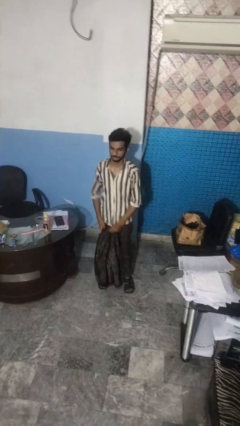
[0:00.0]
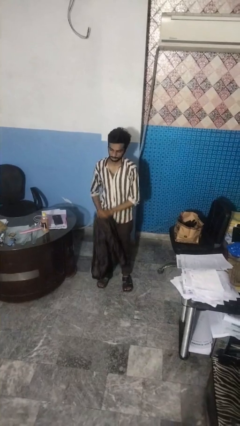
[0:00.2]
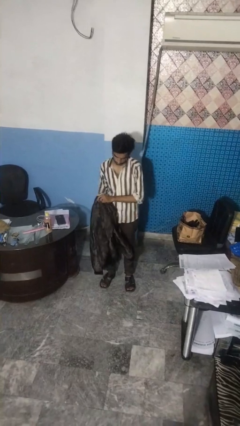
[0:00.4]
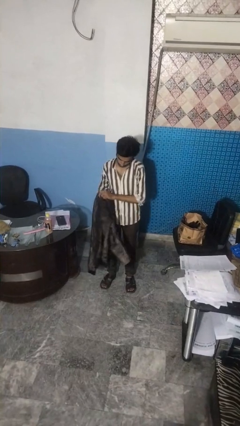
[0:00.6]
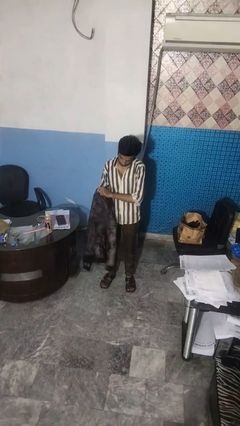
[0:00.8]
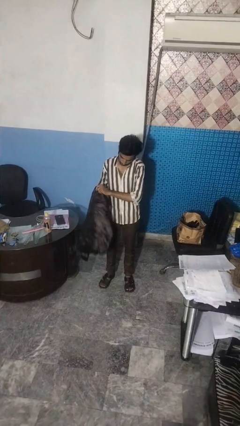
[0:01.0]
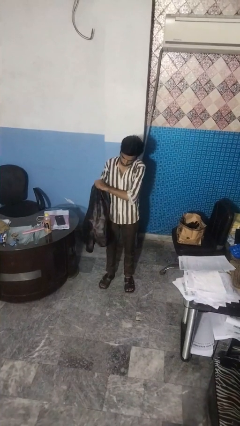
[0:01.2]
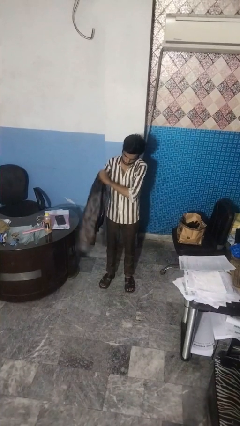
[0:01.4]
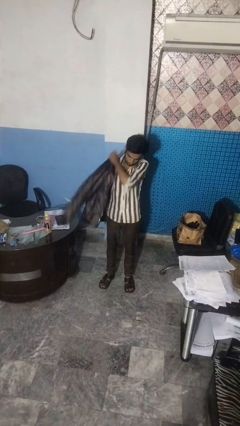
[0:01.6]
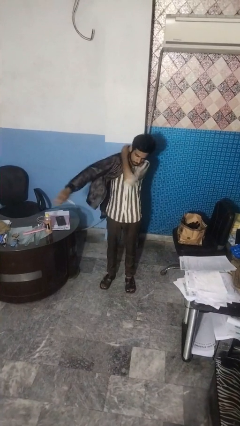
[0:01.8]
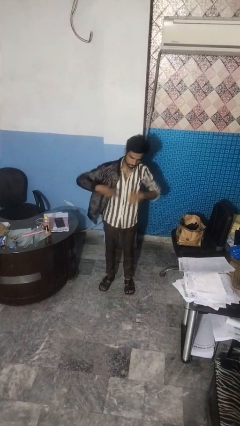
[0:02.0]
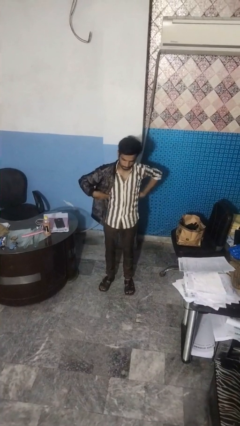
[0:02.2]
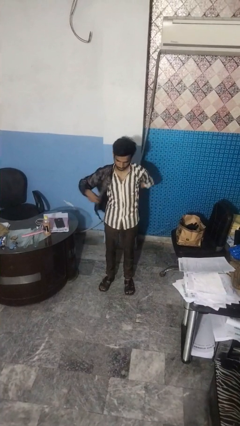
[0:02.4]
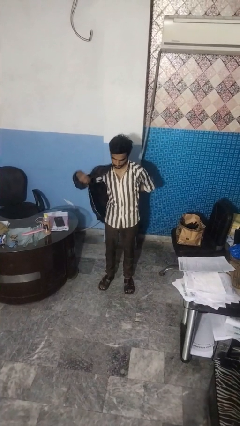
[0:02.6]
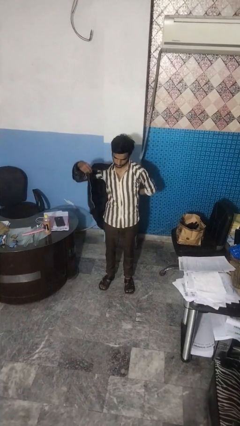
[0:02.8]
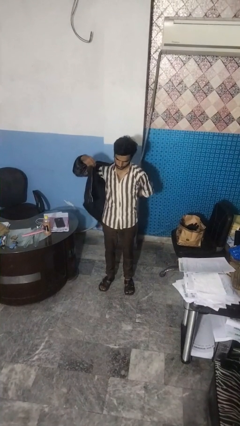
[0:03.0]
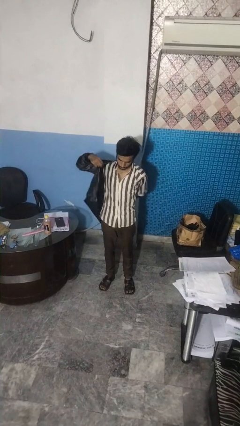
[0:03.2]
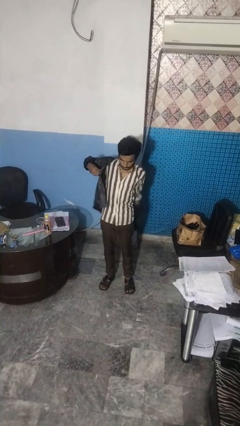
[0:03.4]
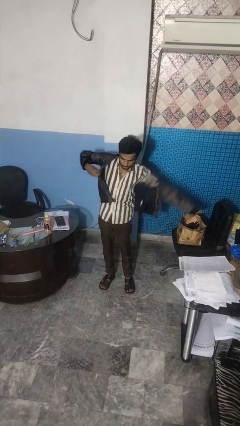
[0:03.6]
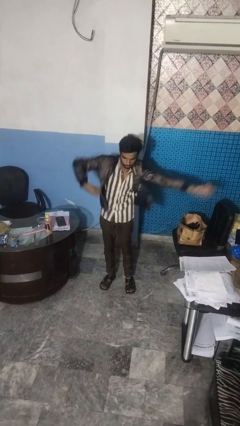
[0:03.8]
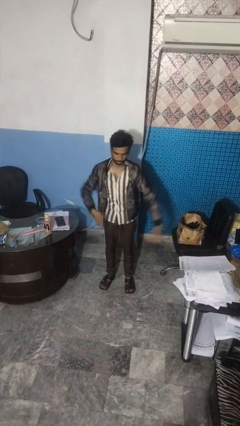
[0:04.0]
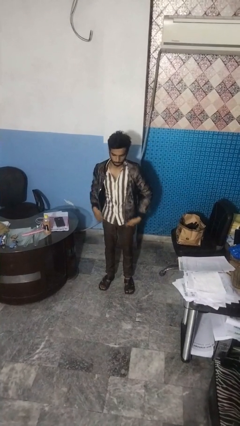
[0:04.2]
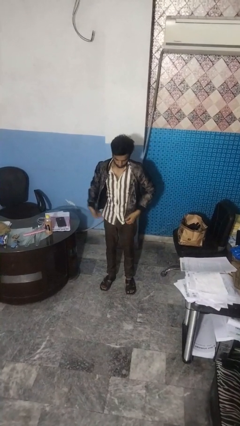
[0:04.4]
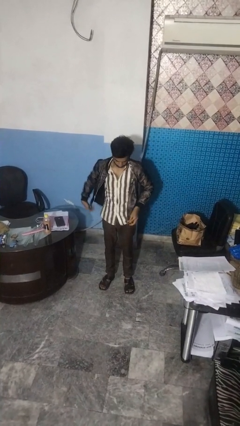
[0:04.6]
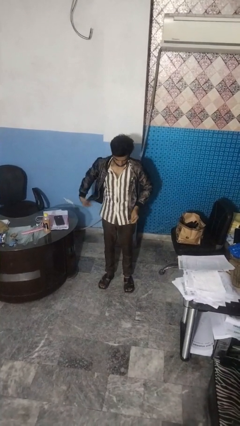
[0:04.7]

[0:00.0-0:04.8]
person puts on jacket

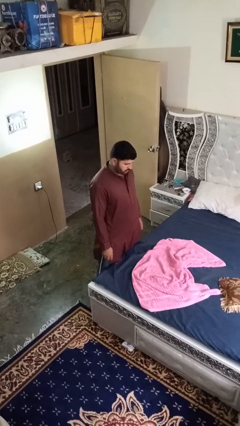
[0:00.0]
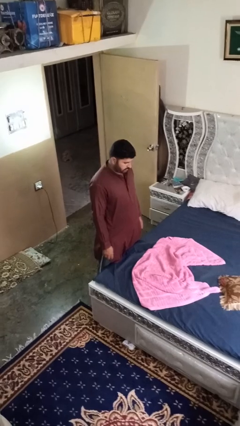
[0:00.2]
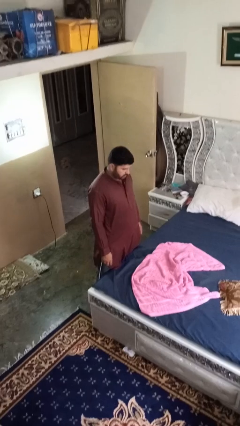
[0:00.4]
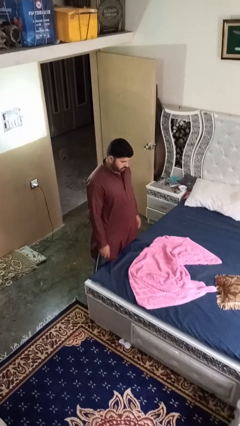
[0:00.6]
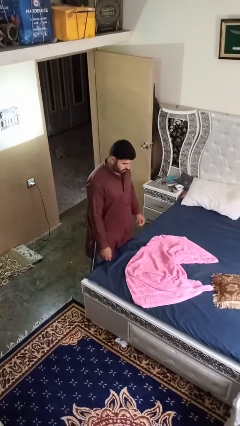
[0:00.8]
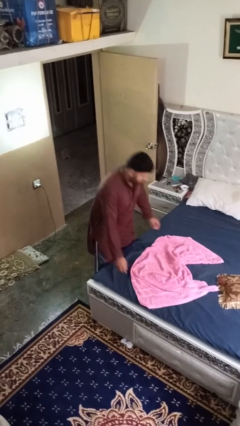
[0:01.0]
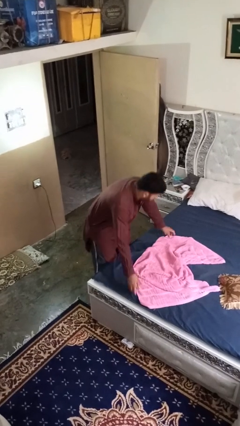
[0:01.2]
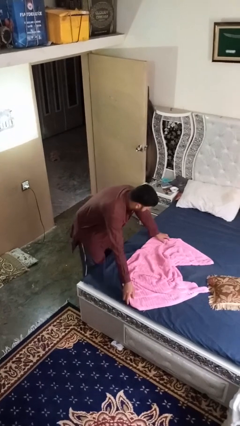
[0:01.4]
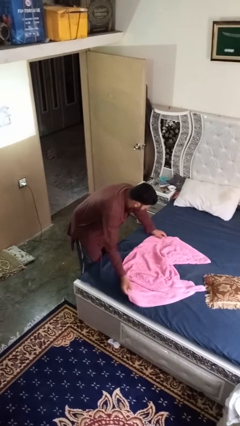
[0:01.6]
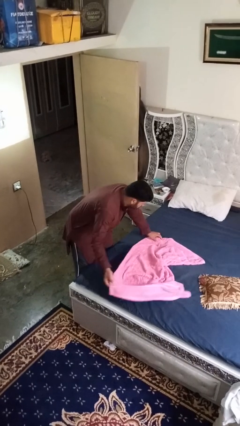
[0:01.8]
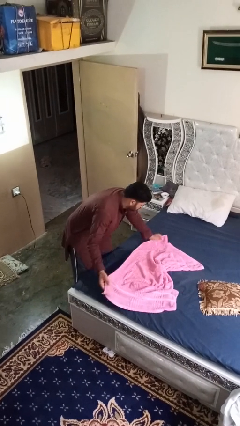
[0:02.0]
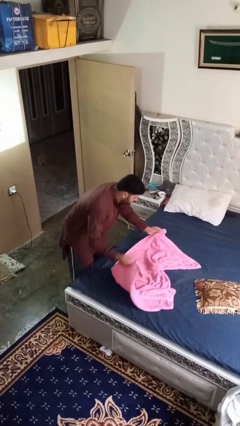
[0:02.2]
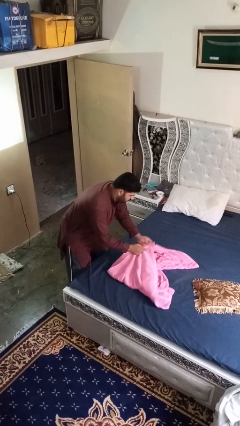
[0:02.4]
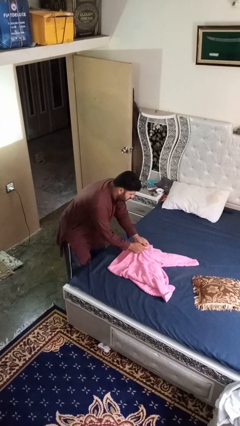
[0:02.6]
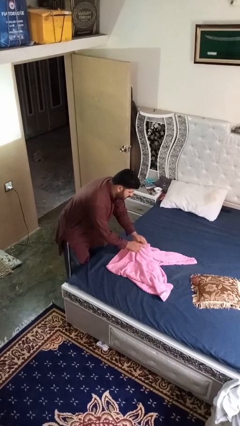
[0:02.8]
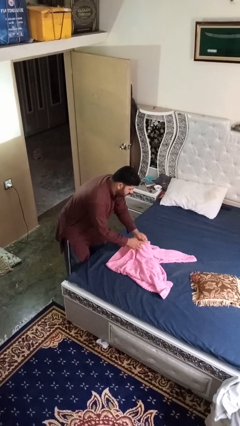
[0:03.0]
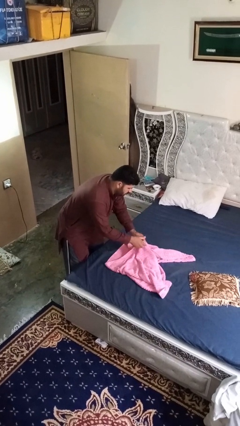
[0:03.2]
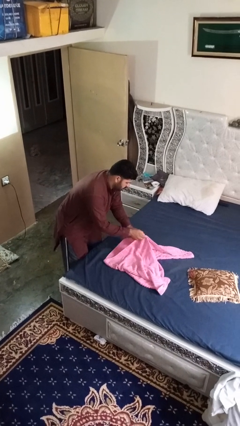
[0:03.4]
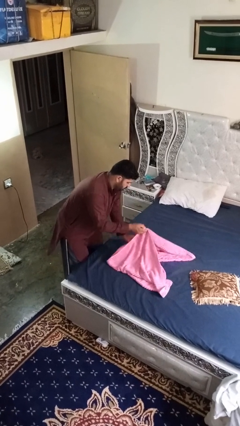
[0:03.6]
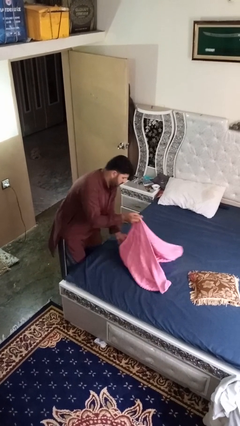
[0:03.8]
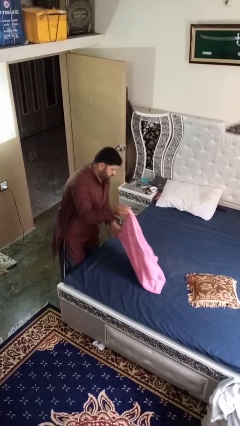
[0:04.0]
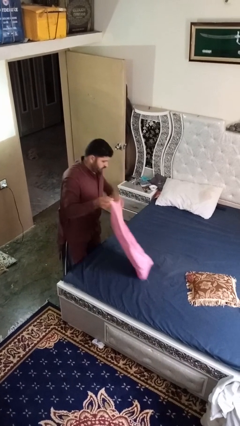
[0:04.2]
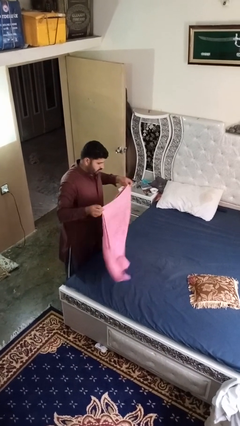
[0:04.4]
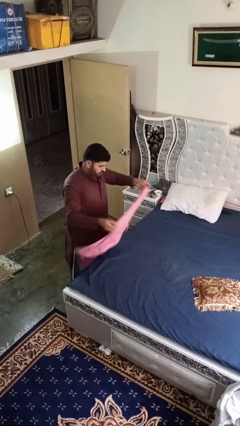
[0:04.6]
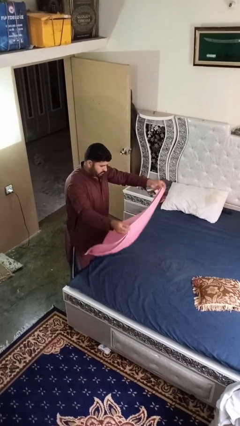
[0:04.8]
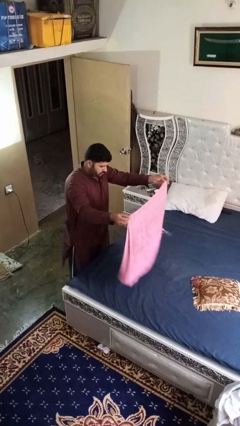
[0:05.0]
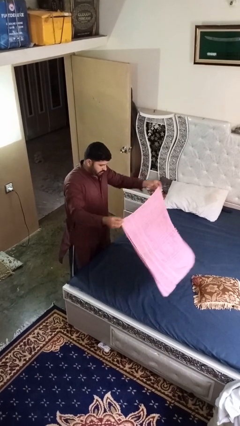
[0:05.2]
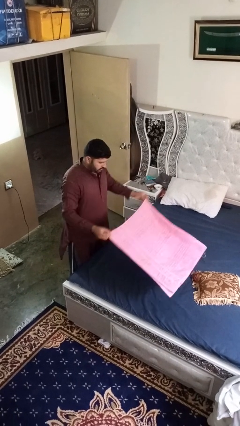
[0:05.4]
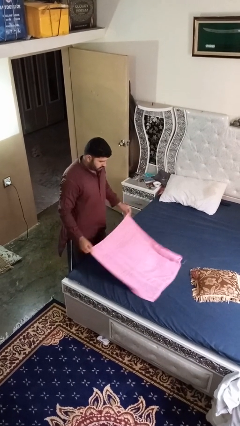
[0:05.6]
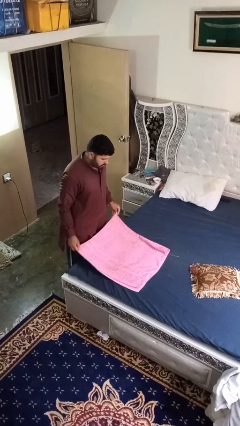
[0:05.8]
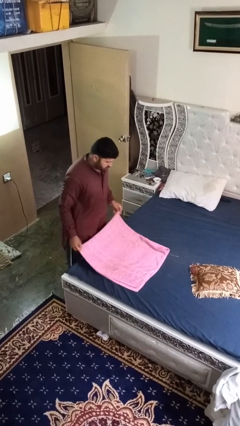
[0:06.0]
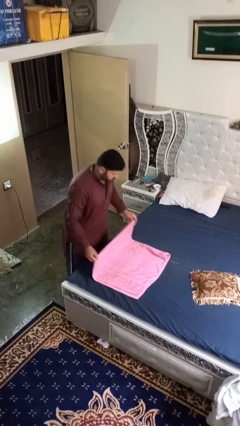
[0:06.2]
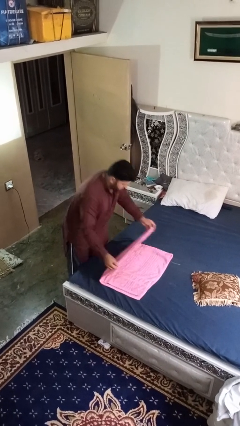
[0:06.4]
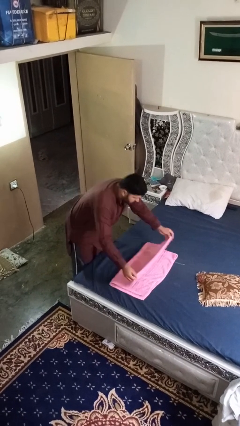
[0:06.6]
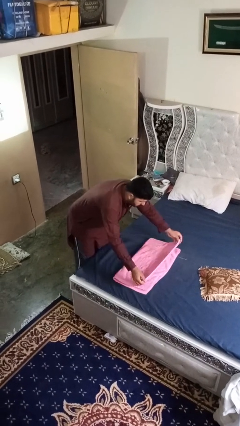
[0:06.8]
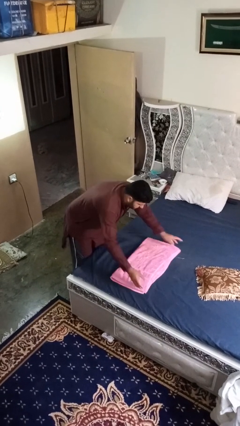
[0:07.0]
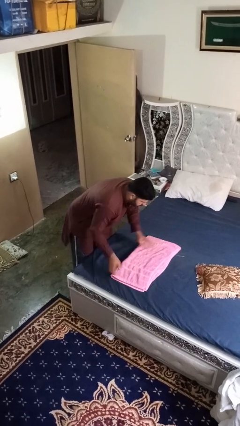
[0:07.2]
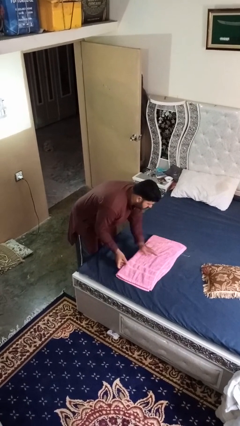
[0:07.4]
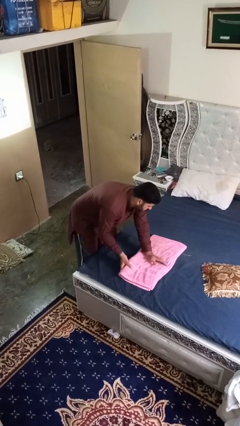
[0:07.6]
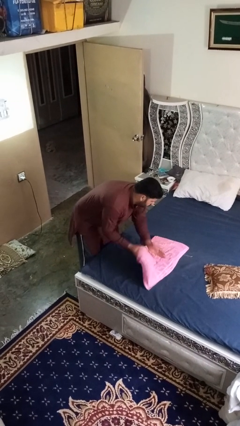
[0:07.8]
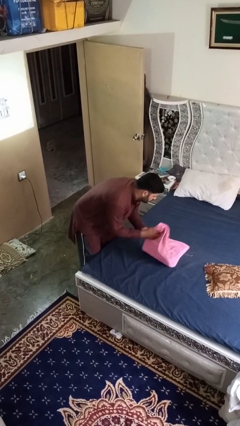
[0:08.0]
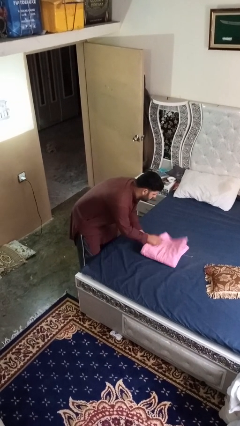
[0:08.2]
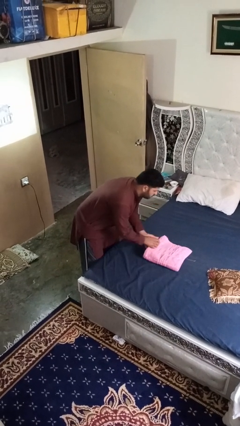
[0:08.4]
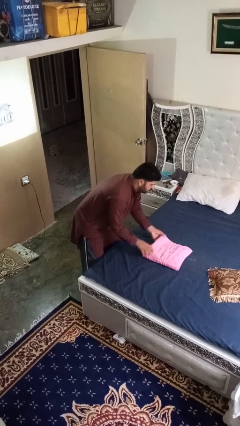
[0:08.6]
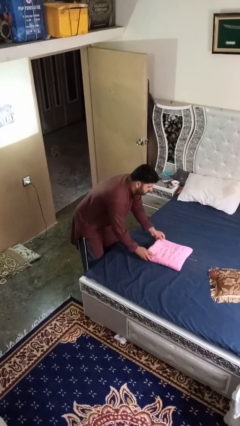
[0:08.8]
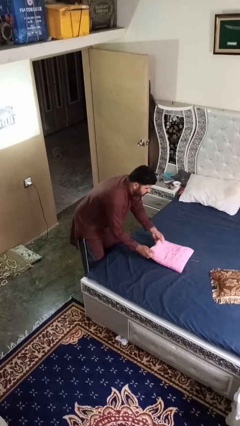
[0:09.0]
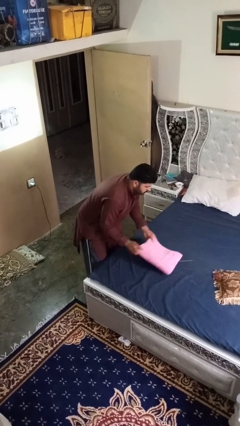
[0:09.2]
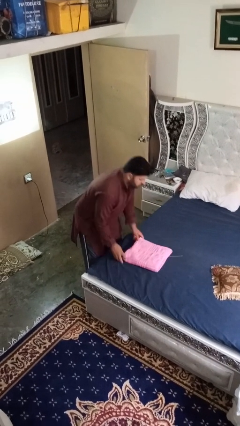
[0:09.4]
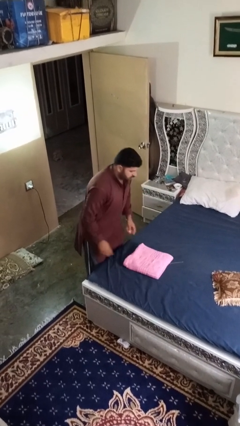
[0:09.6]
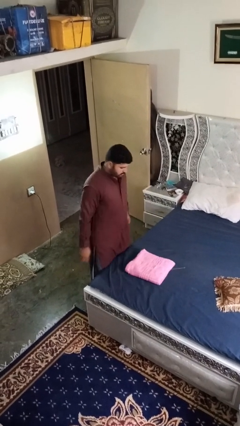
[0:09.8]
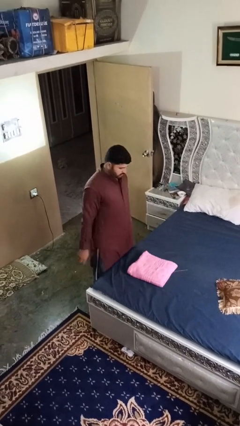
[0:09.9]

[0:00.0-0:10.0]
person folds towel

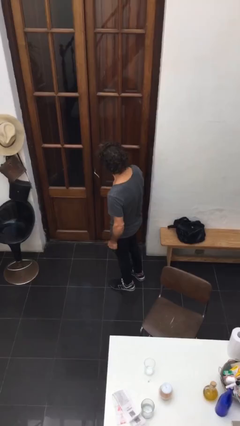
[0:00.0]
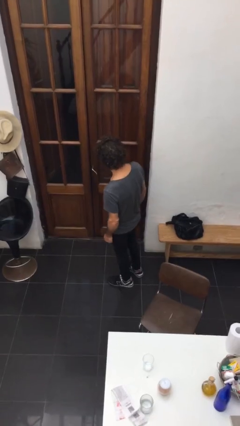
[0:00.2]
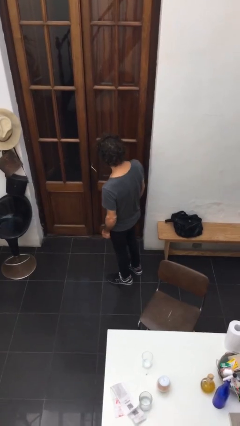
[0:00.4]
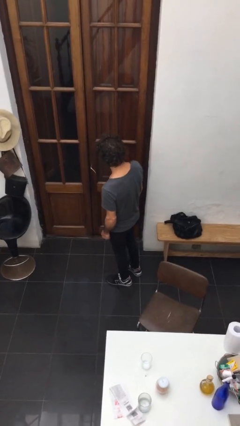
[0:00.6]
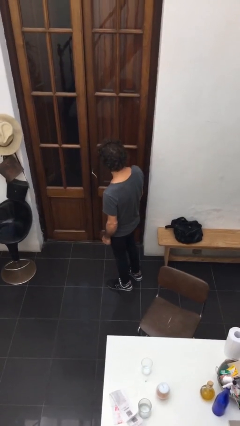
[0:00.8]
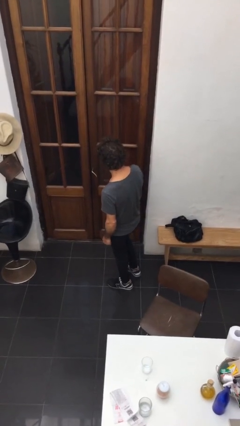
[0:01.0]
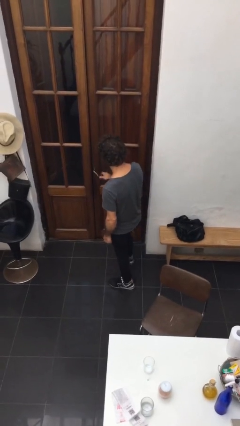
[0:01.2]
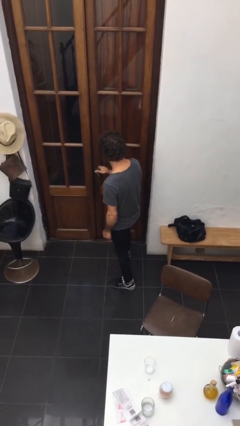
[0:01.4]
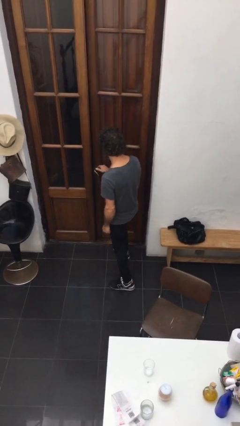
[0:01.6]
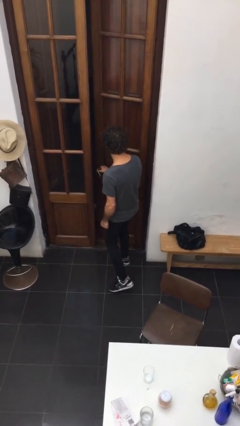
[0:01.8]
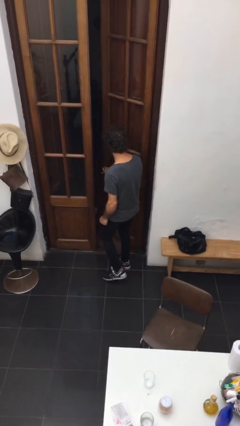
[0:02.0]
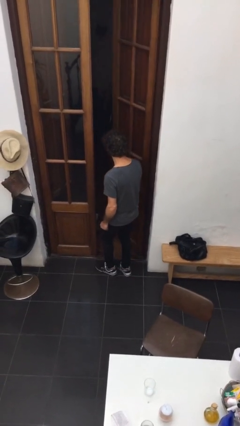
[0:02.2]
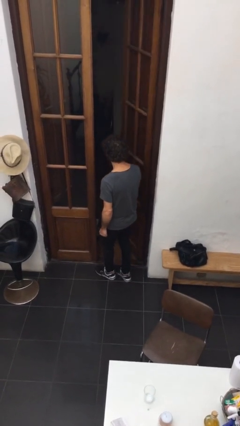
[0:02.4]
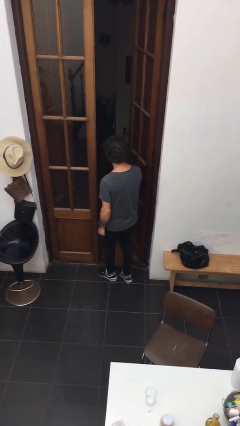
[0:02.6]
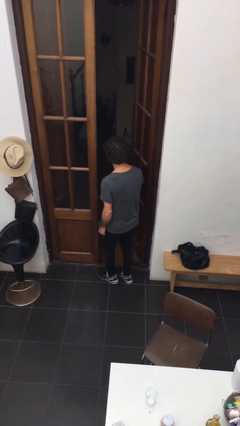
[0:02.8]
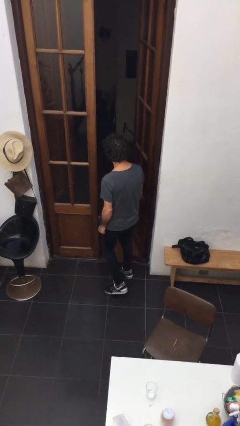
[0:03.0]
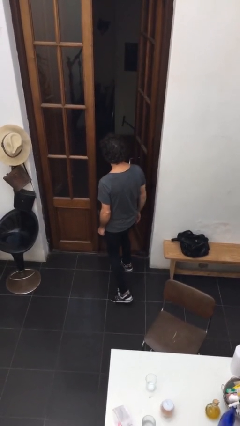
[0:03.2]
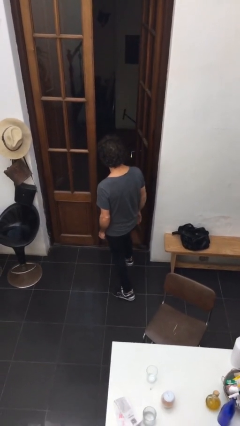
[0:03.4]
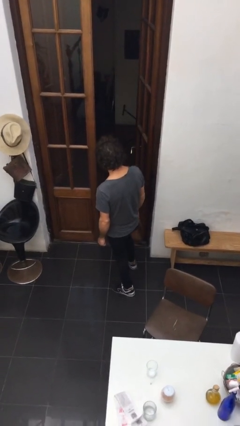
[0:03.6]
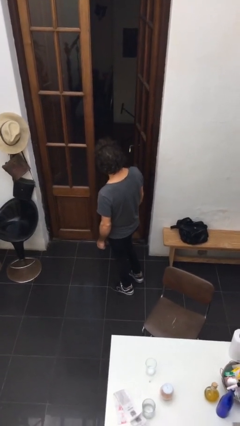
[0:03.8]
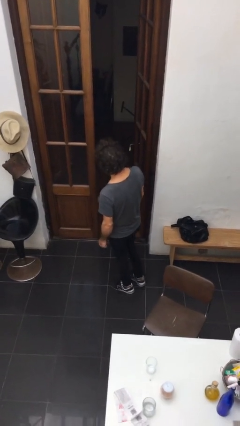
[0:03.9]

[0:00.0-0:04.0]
person opens facility door
